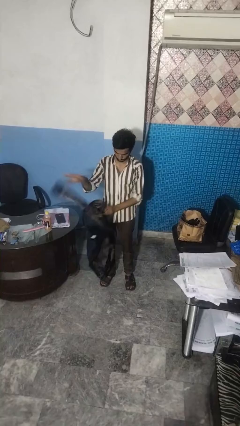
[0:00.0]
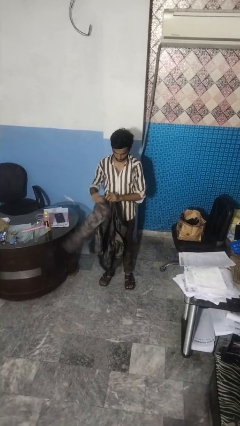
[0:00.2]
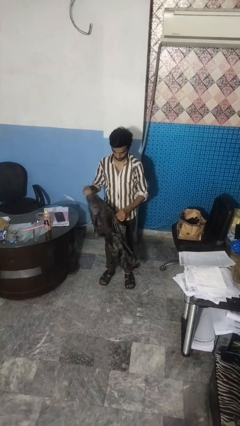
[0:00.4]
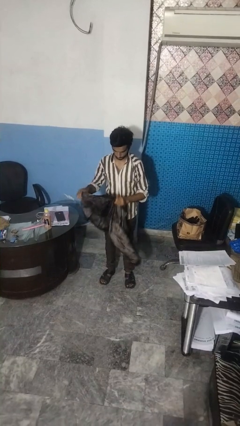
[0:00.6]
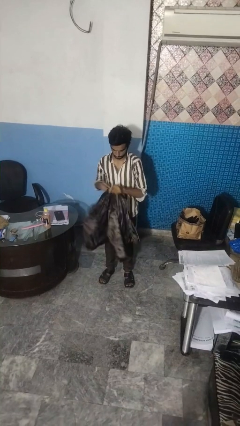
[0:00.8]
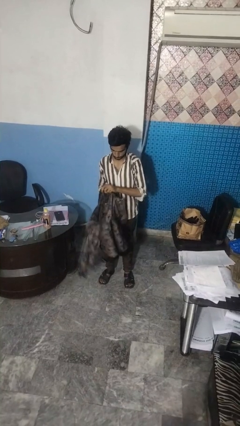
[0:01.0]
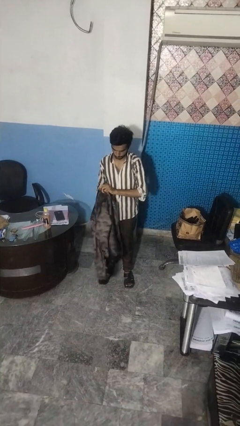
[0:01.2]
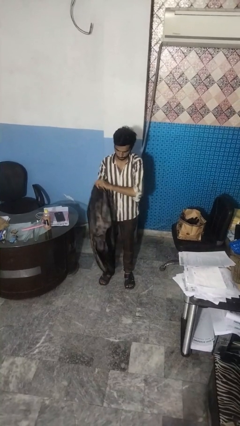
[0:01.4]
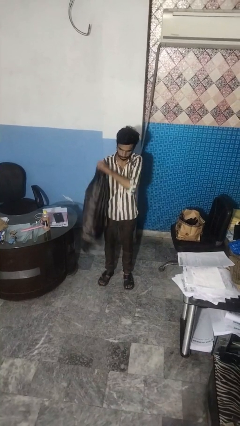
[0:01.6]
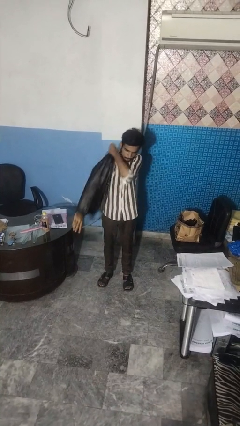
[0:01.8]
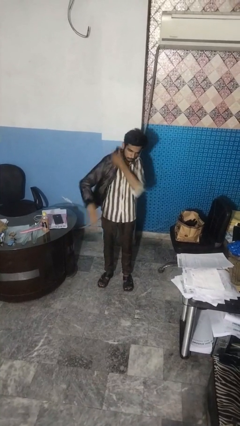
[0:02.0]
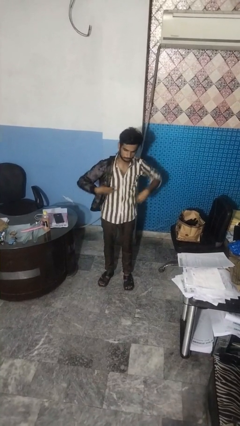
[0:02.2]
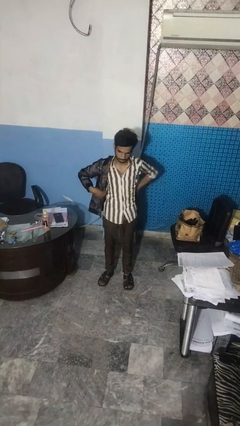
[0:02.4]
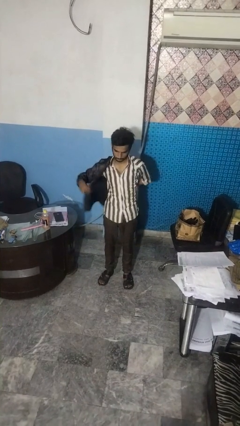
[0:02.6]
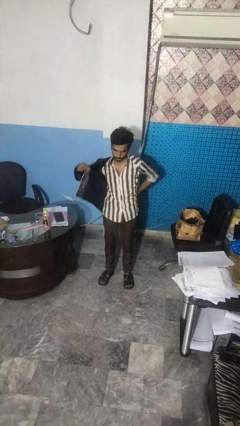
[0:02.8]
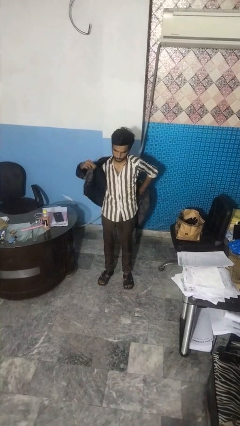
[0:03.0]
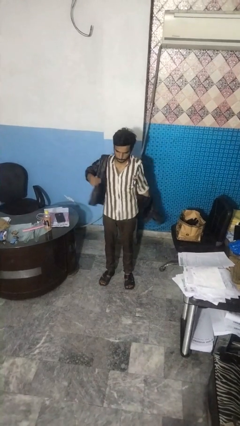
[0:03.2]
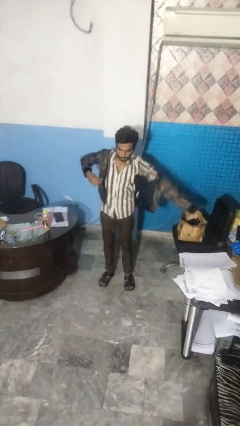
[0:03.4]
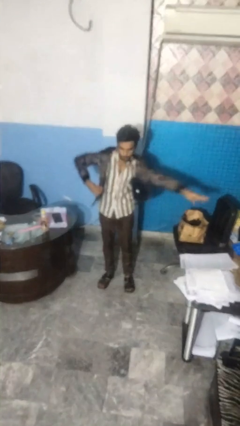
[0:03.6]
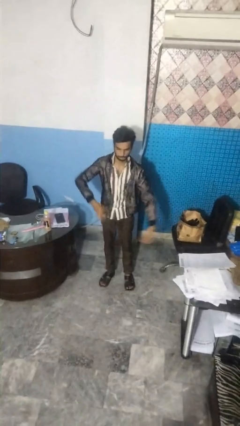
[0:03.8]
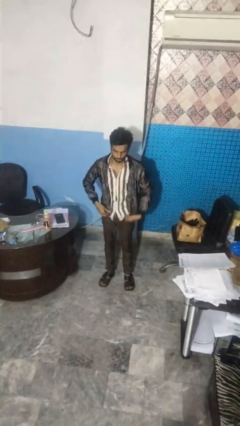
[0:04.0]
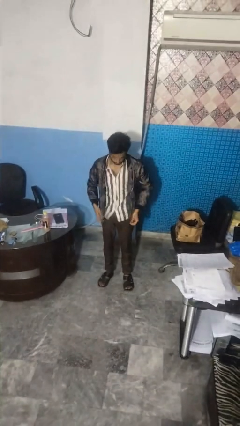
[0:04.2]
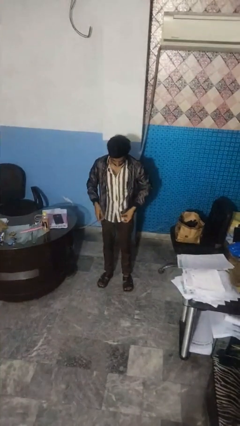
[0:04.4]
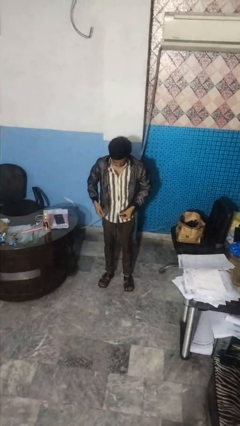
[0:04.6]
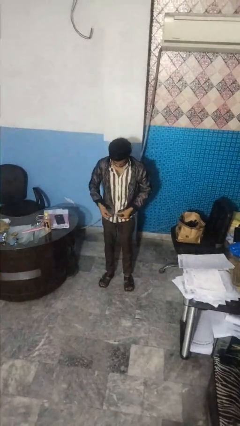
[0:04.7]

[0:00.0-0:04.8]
person puts on jacket

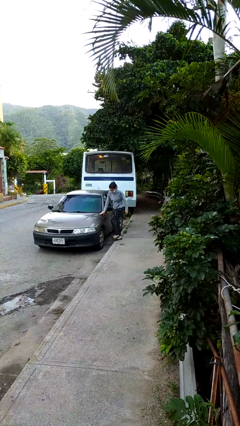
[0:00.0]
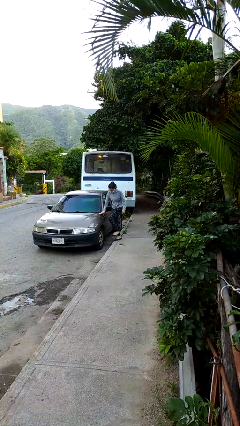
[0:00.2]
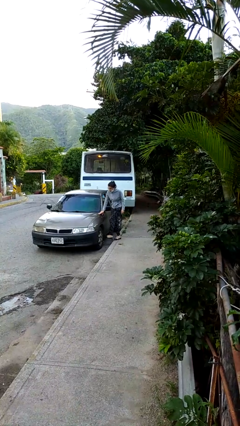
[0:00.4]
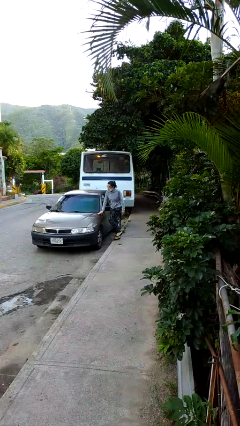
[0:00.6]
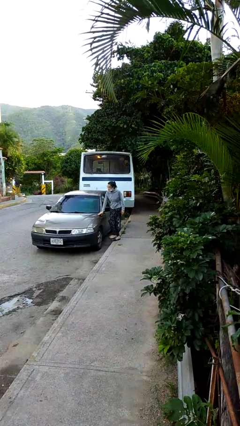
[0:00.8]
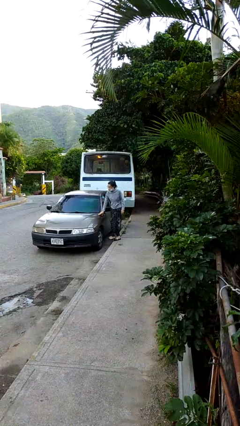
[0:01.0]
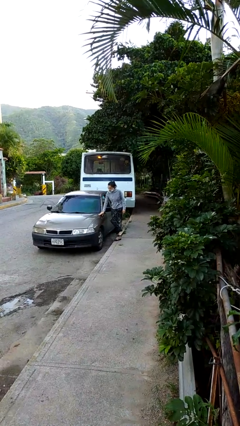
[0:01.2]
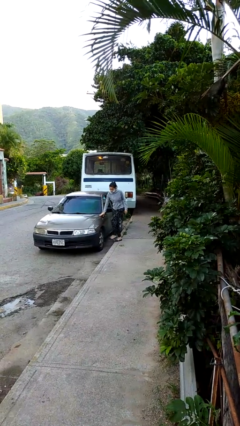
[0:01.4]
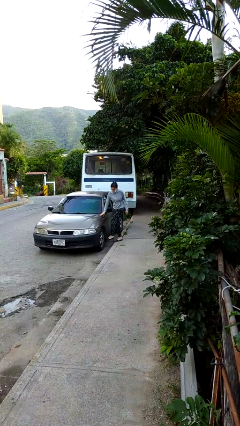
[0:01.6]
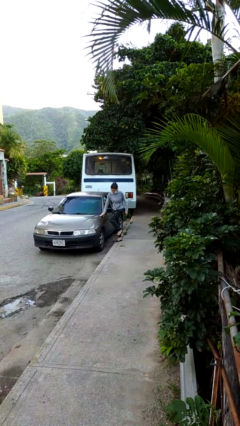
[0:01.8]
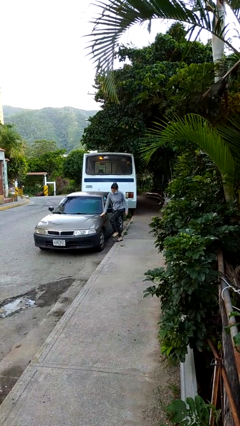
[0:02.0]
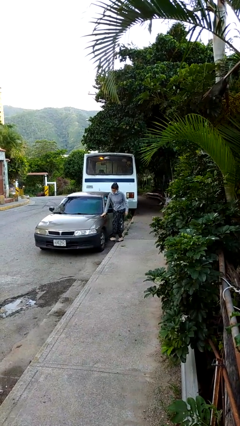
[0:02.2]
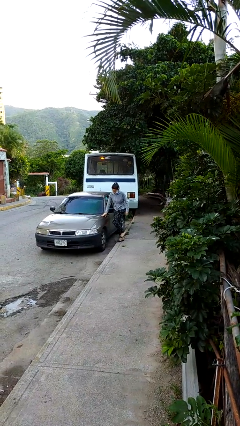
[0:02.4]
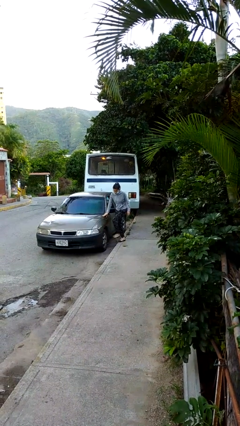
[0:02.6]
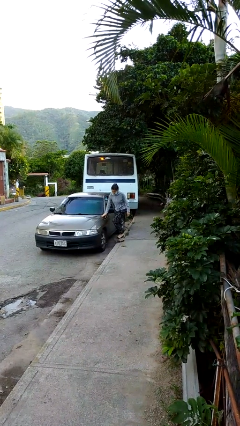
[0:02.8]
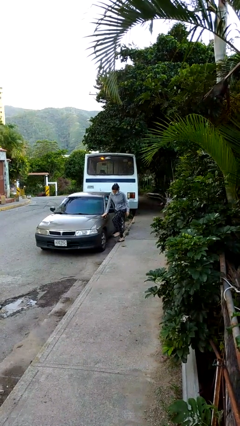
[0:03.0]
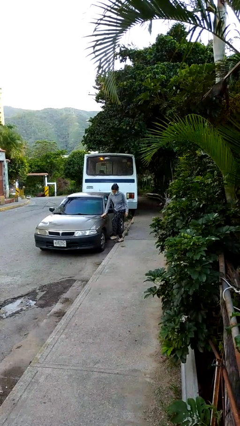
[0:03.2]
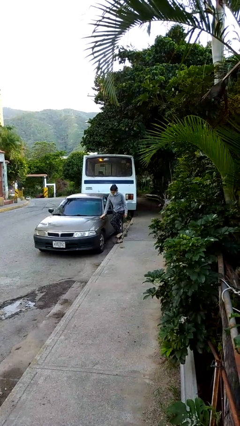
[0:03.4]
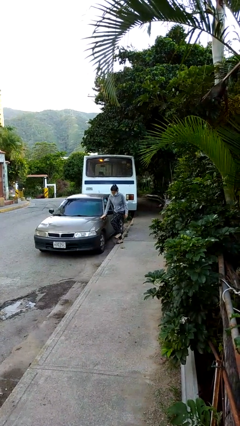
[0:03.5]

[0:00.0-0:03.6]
person kicks car tires

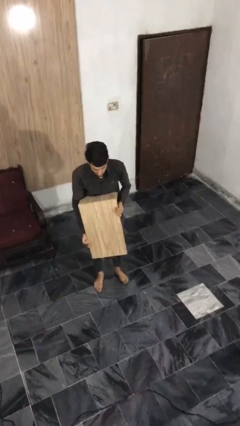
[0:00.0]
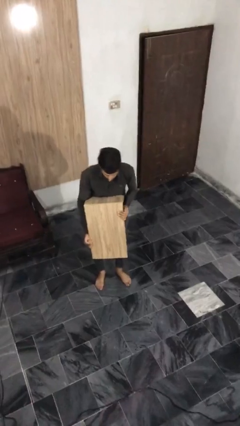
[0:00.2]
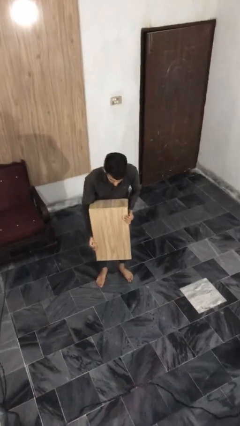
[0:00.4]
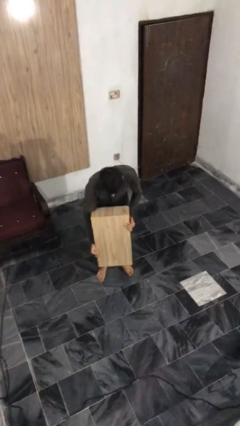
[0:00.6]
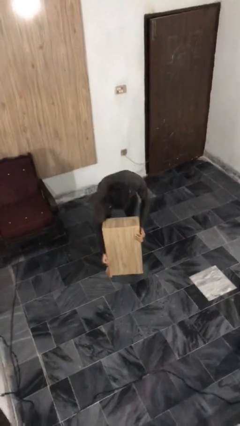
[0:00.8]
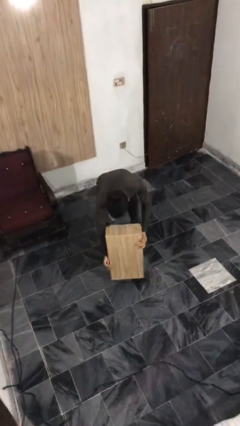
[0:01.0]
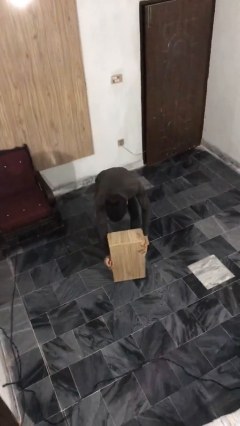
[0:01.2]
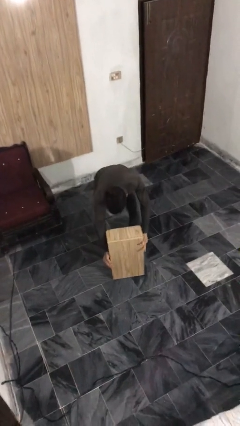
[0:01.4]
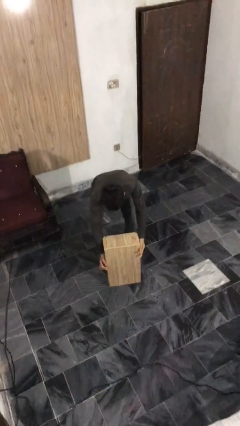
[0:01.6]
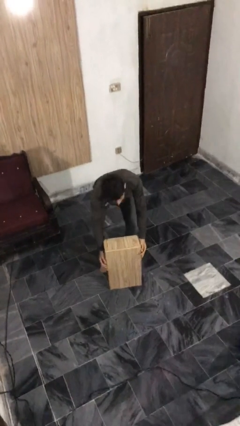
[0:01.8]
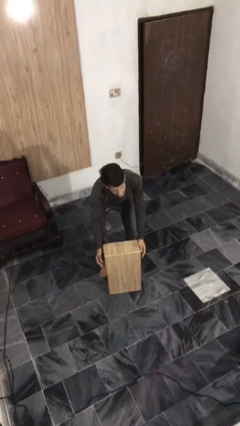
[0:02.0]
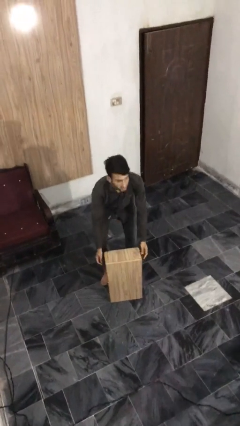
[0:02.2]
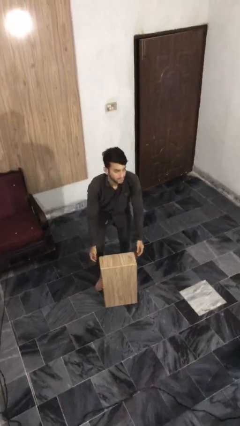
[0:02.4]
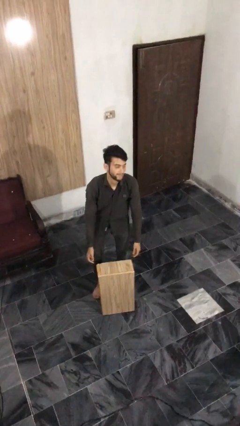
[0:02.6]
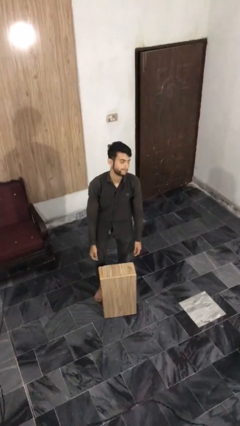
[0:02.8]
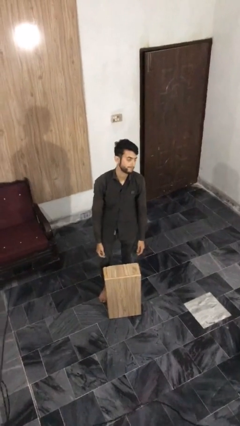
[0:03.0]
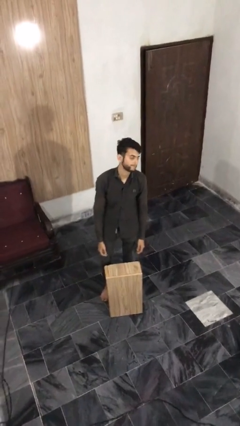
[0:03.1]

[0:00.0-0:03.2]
person puts down object on floor

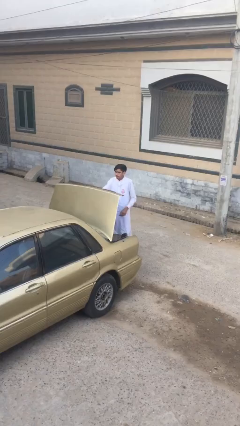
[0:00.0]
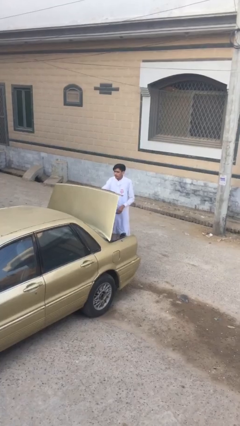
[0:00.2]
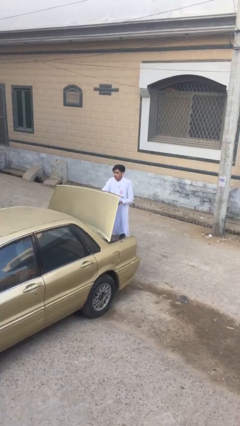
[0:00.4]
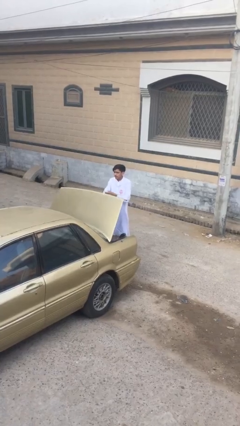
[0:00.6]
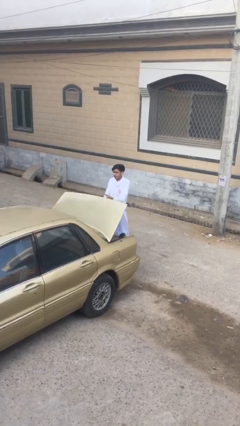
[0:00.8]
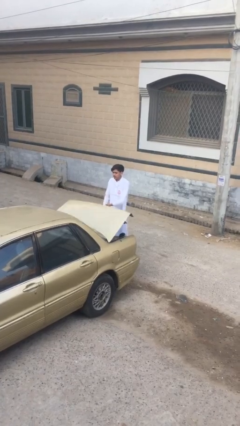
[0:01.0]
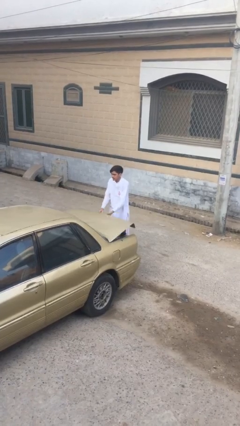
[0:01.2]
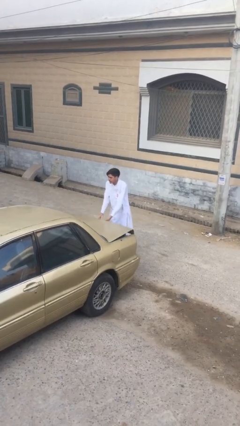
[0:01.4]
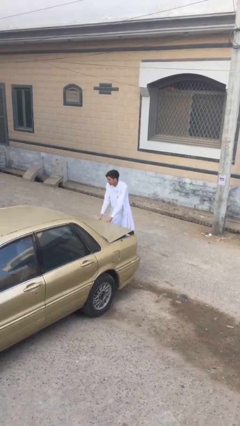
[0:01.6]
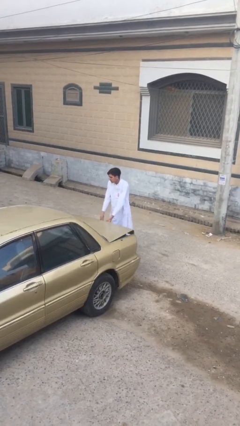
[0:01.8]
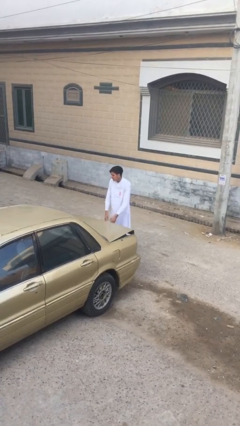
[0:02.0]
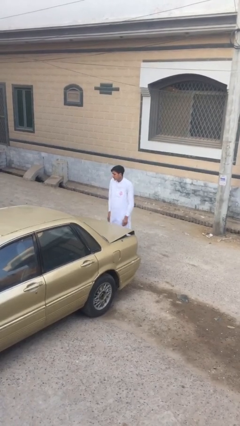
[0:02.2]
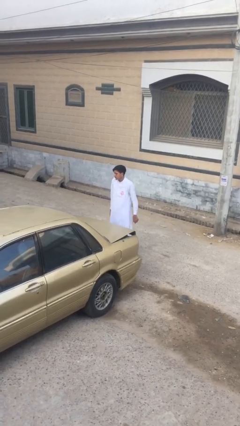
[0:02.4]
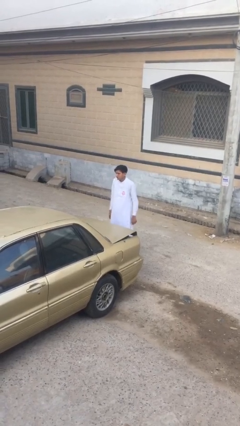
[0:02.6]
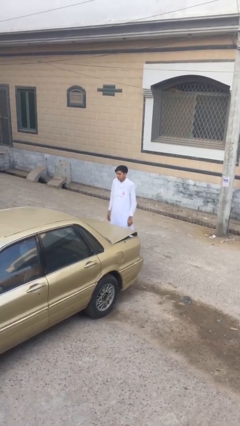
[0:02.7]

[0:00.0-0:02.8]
person closes car trunk

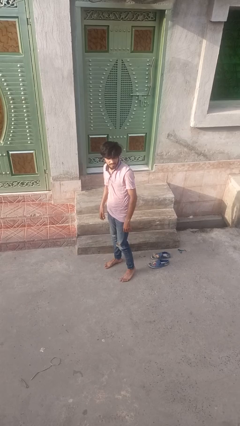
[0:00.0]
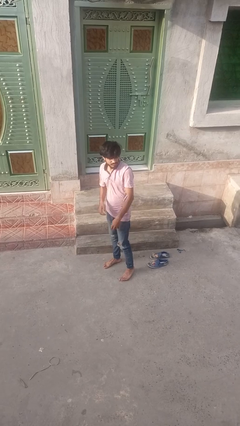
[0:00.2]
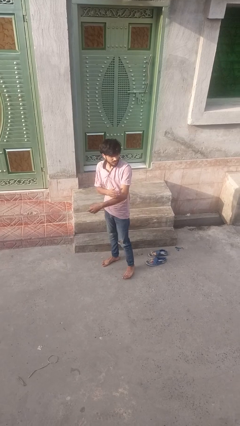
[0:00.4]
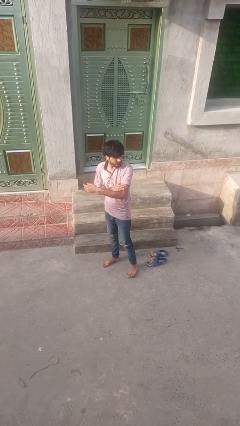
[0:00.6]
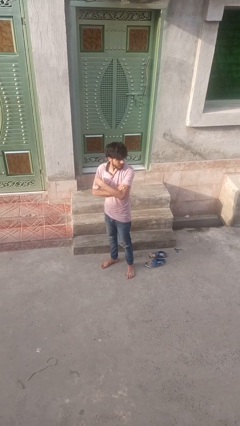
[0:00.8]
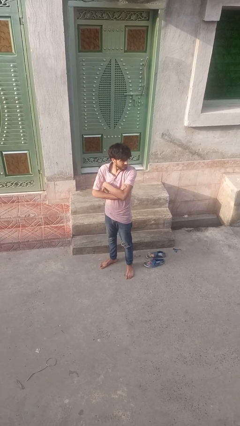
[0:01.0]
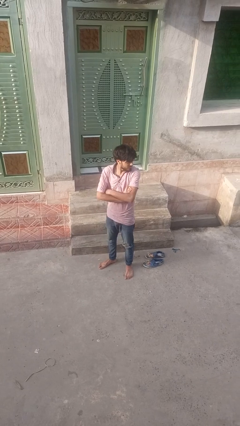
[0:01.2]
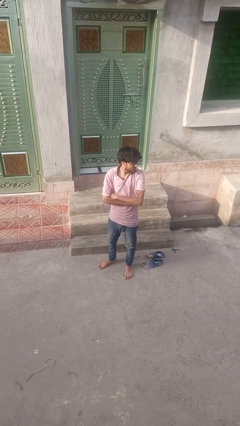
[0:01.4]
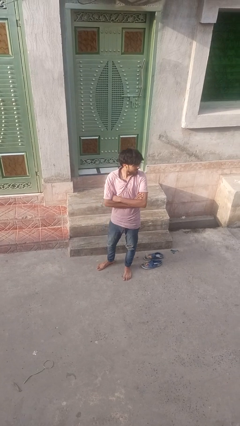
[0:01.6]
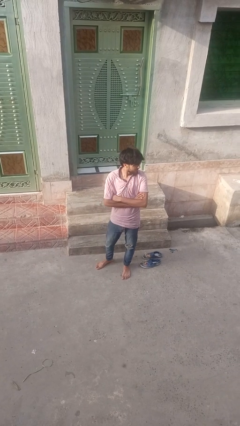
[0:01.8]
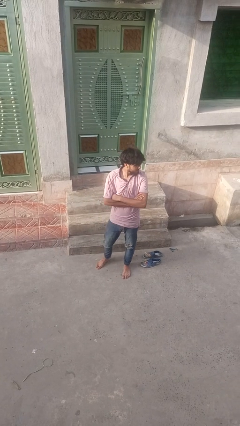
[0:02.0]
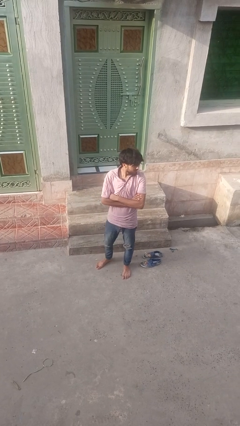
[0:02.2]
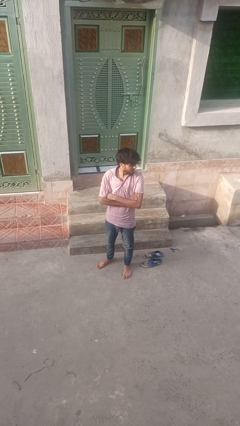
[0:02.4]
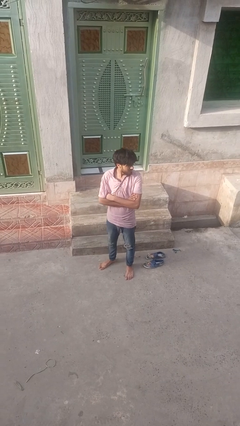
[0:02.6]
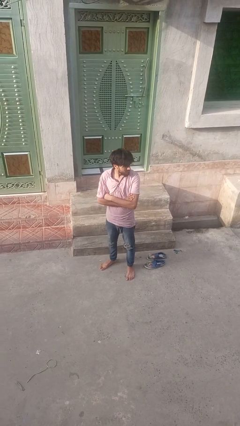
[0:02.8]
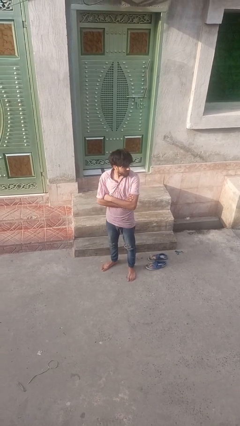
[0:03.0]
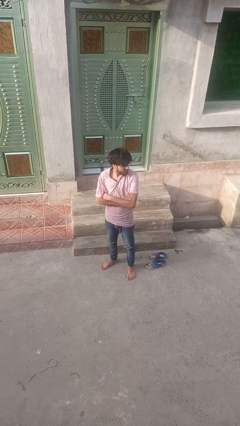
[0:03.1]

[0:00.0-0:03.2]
person crosses arms
